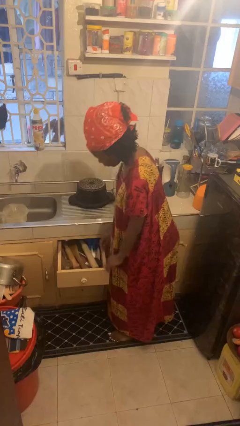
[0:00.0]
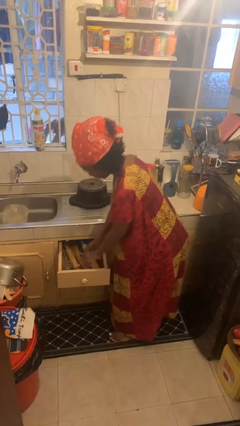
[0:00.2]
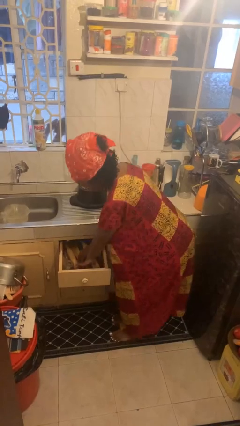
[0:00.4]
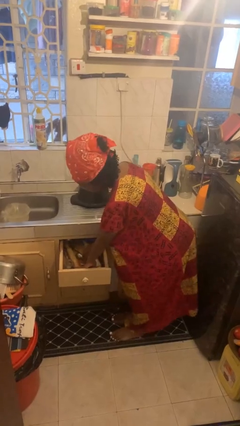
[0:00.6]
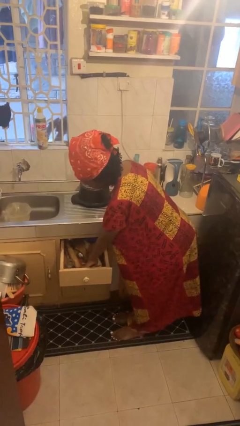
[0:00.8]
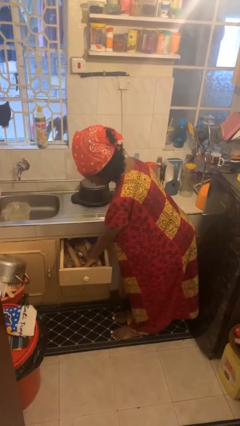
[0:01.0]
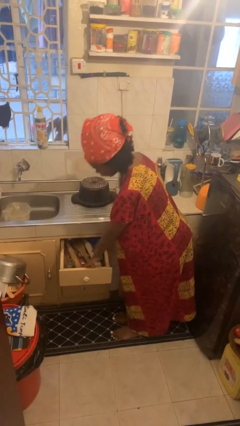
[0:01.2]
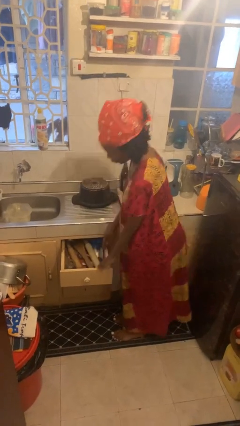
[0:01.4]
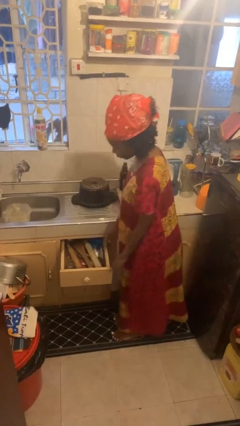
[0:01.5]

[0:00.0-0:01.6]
person searches in kitchen drawer

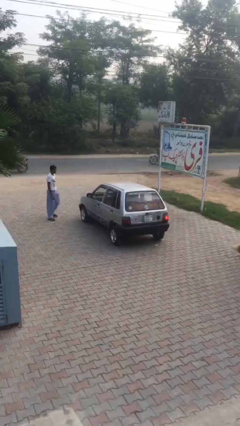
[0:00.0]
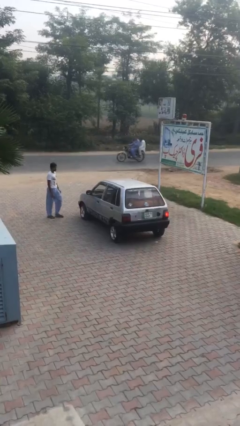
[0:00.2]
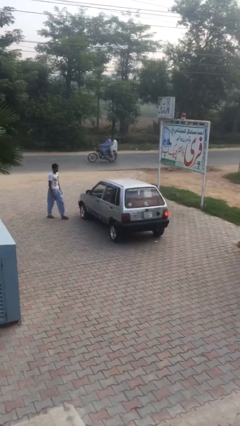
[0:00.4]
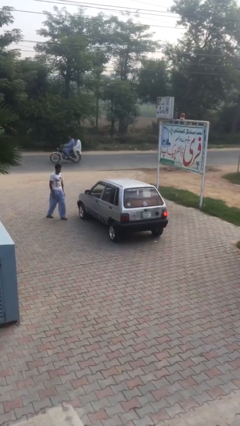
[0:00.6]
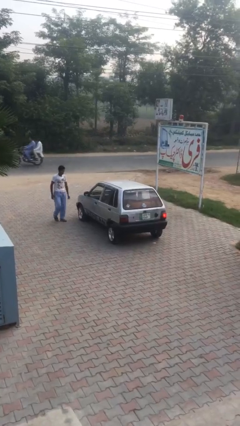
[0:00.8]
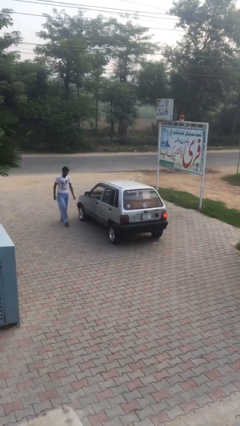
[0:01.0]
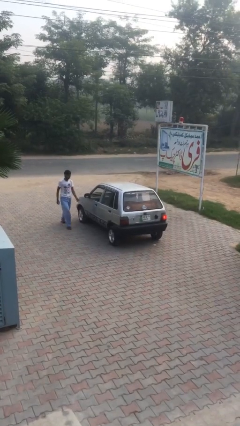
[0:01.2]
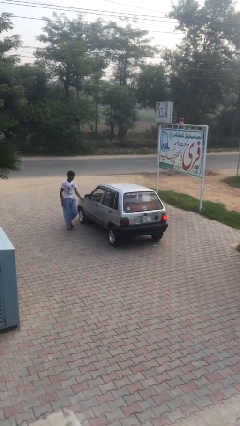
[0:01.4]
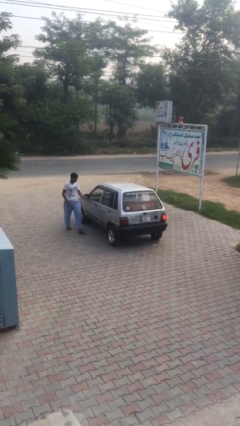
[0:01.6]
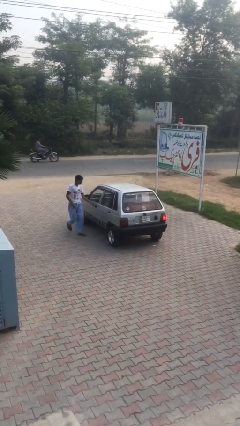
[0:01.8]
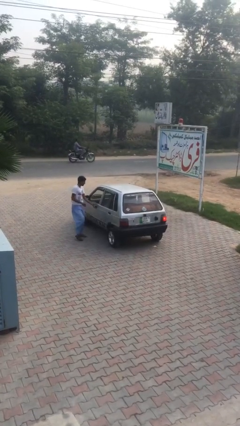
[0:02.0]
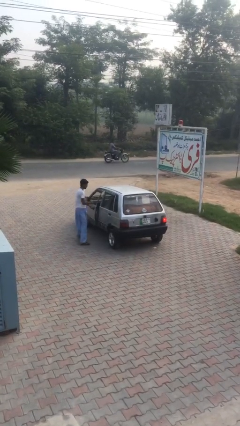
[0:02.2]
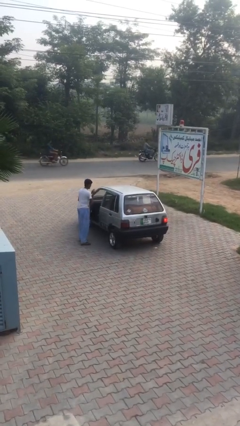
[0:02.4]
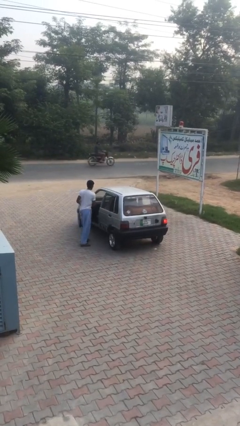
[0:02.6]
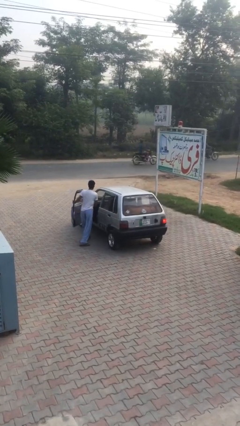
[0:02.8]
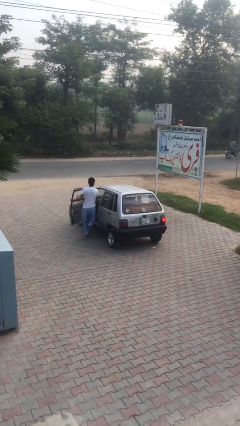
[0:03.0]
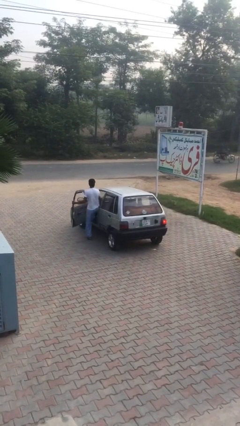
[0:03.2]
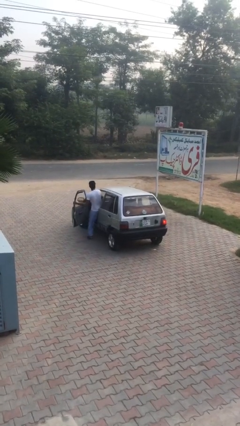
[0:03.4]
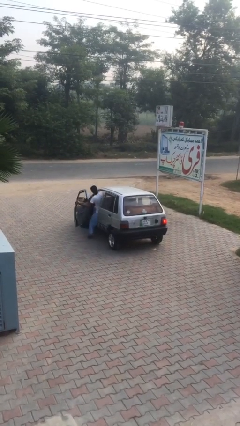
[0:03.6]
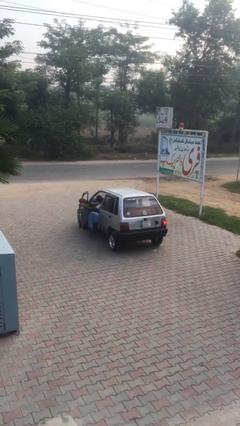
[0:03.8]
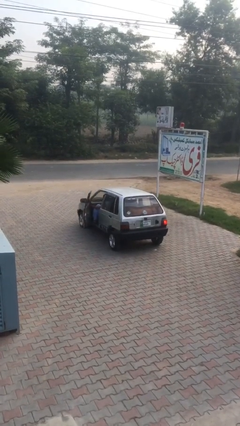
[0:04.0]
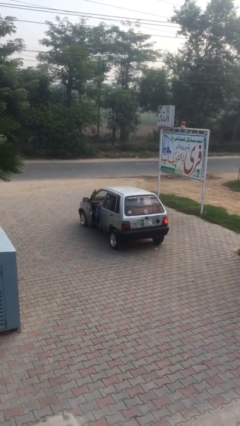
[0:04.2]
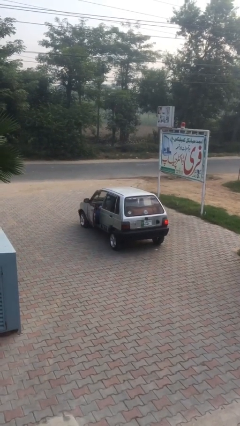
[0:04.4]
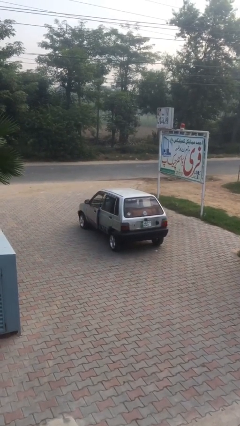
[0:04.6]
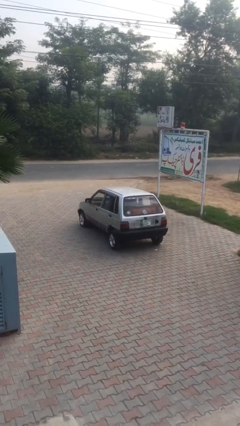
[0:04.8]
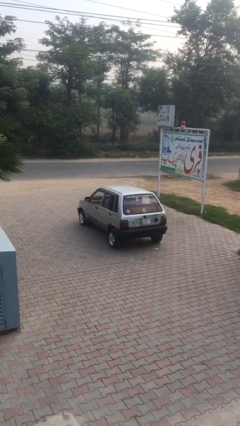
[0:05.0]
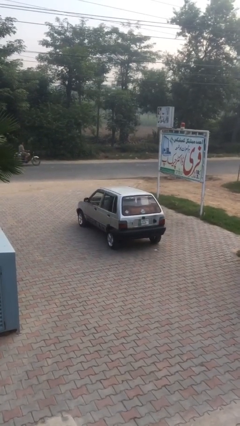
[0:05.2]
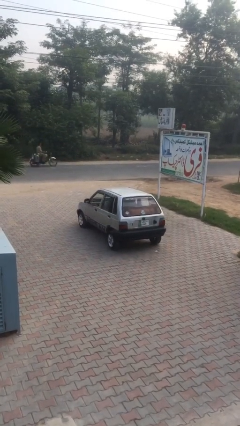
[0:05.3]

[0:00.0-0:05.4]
car picks up person

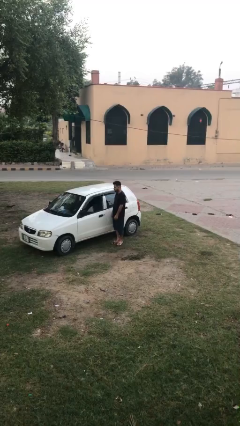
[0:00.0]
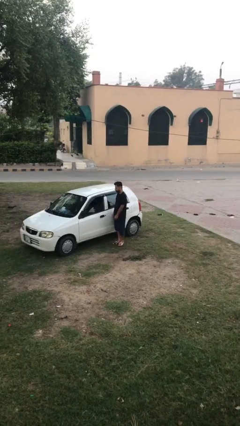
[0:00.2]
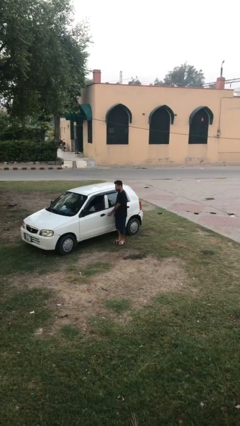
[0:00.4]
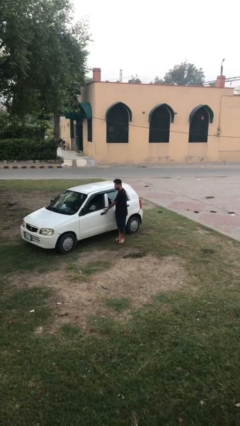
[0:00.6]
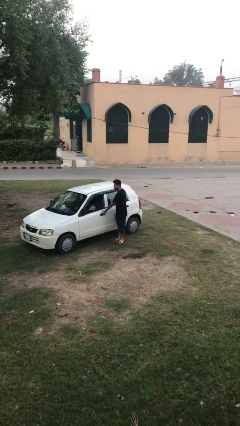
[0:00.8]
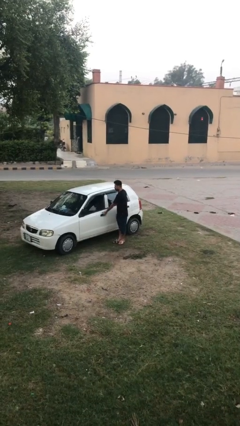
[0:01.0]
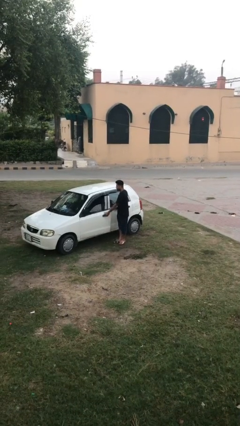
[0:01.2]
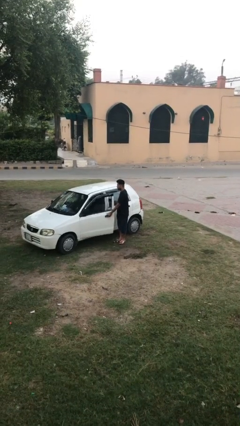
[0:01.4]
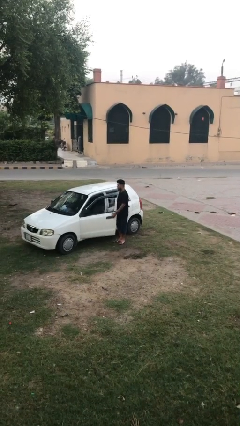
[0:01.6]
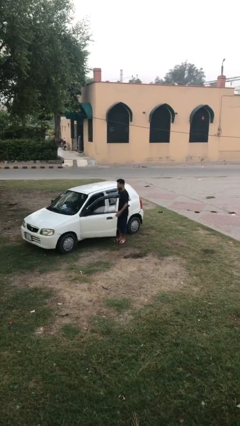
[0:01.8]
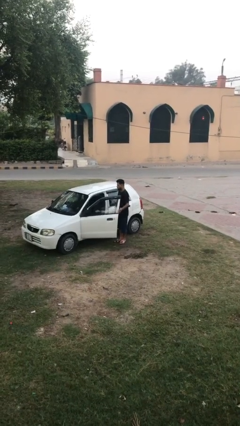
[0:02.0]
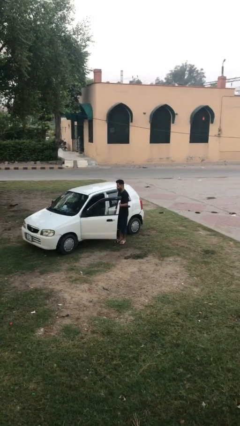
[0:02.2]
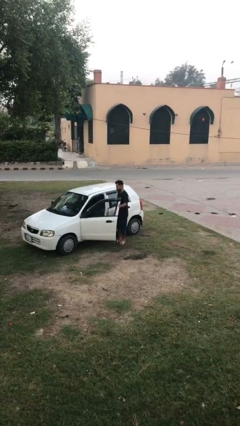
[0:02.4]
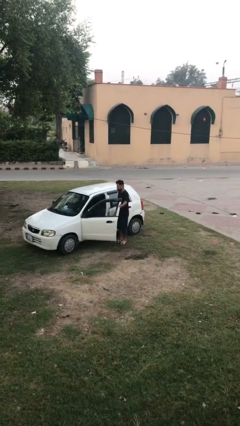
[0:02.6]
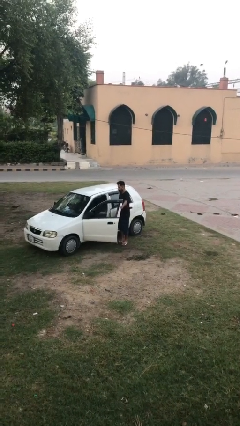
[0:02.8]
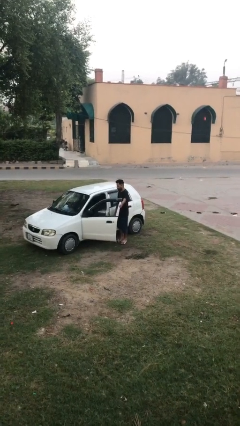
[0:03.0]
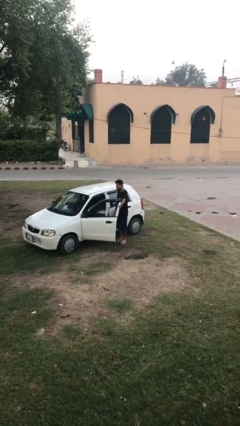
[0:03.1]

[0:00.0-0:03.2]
person opens car door

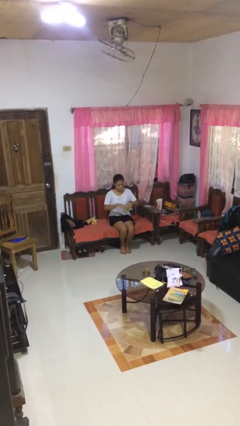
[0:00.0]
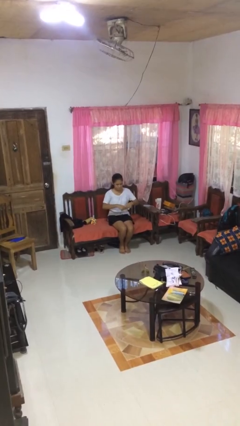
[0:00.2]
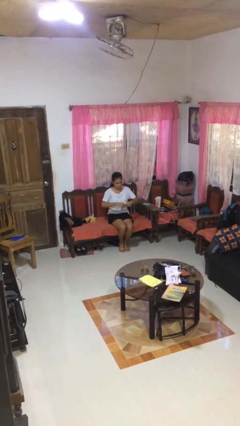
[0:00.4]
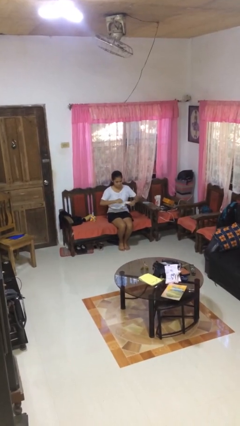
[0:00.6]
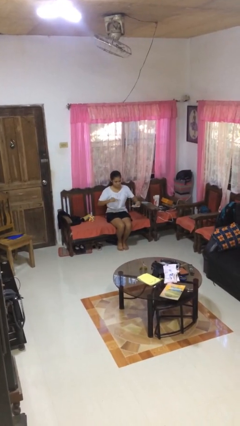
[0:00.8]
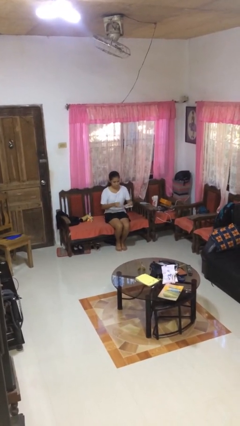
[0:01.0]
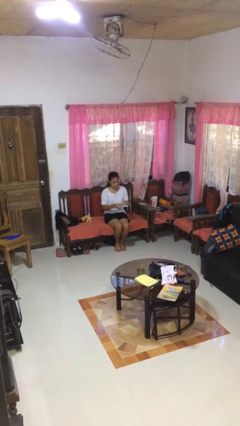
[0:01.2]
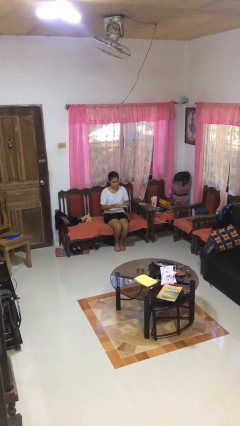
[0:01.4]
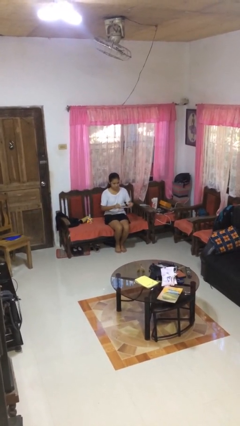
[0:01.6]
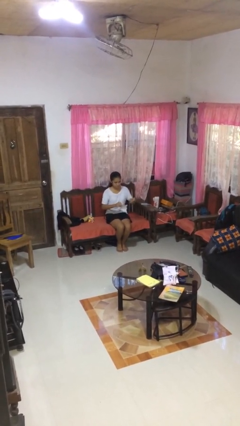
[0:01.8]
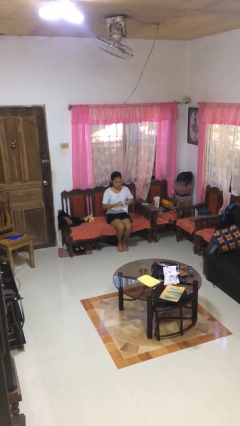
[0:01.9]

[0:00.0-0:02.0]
person tears paper

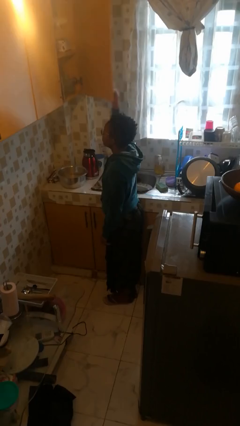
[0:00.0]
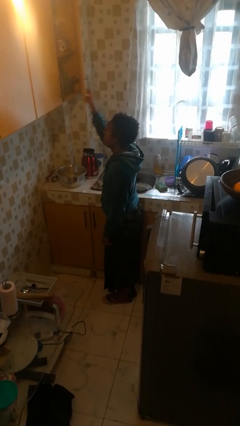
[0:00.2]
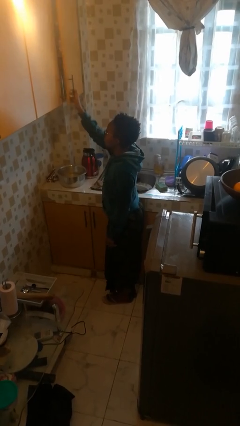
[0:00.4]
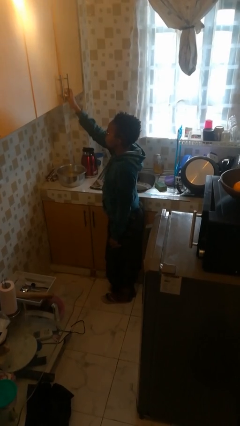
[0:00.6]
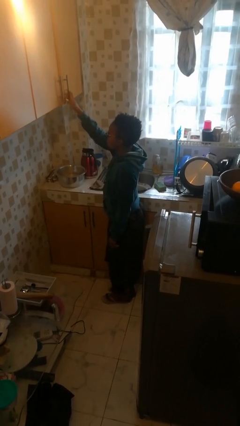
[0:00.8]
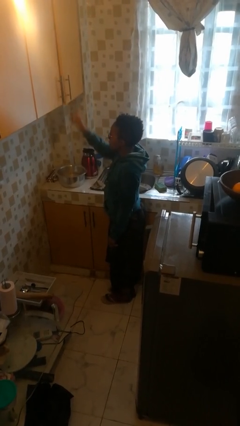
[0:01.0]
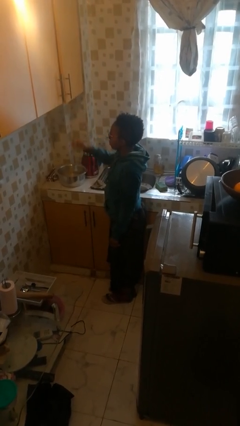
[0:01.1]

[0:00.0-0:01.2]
person closes cabinet

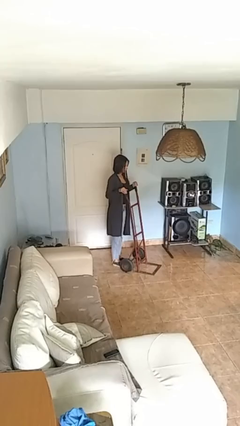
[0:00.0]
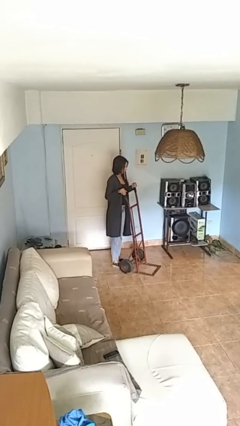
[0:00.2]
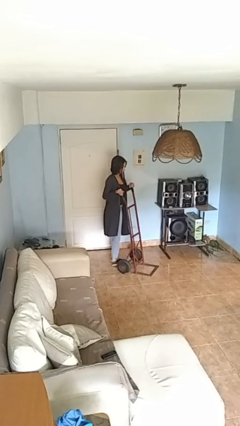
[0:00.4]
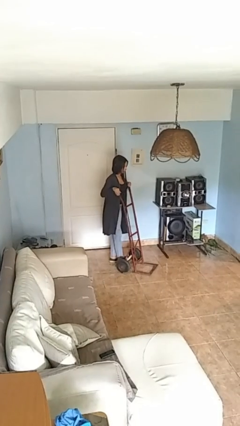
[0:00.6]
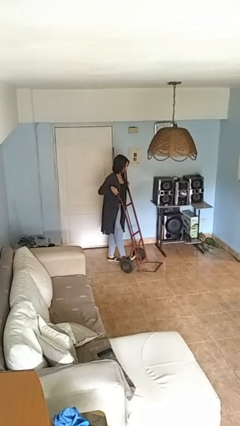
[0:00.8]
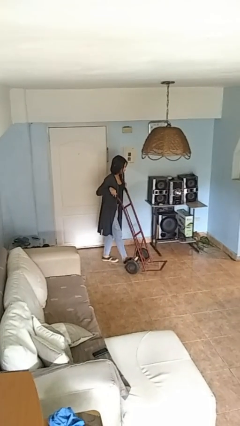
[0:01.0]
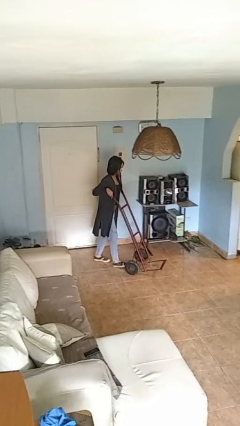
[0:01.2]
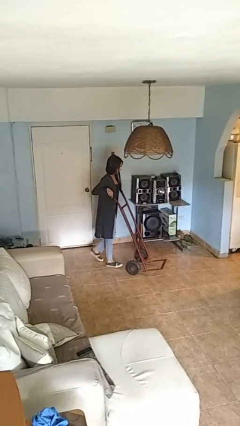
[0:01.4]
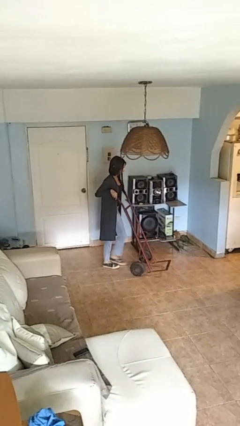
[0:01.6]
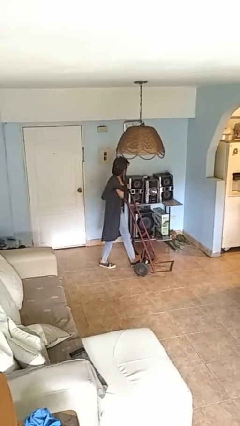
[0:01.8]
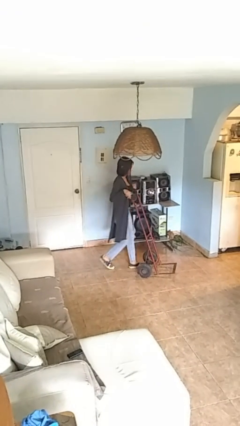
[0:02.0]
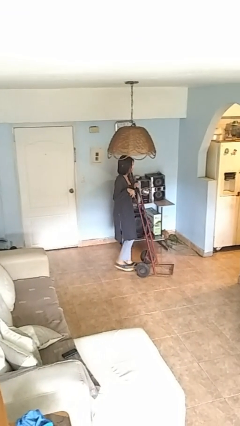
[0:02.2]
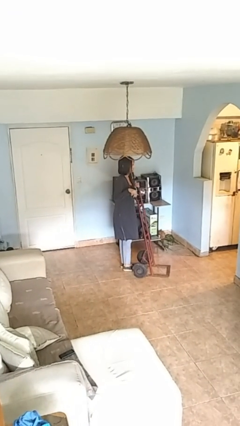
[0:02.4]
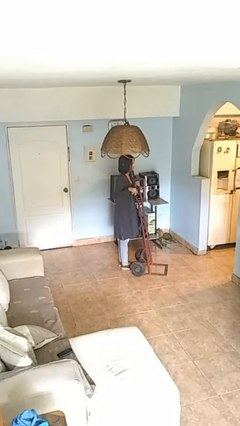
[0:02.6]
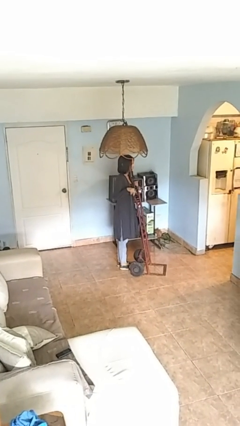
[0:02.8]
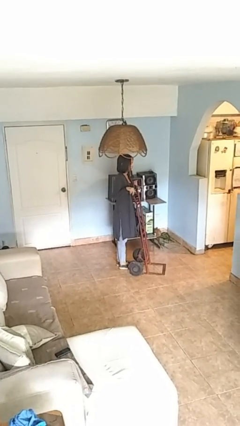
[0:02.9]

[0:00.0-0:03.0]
person pushes wheeled cart

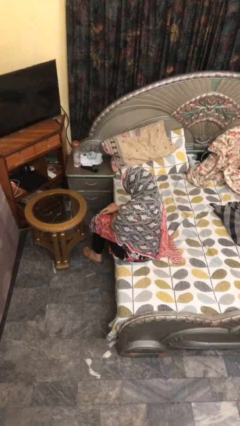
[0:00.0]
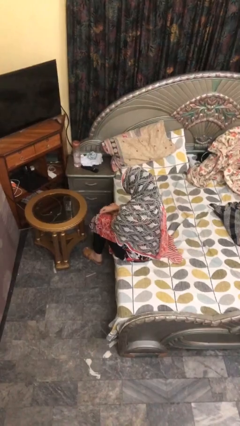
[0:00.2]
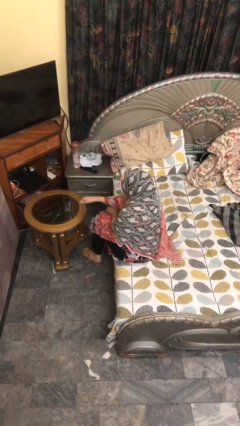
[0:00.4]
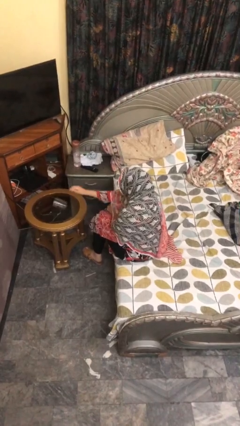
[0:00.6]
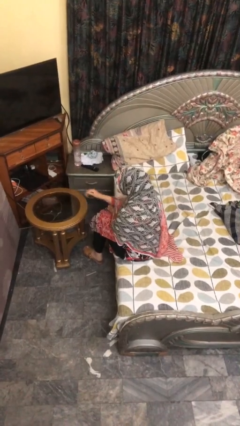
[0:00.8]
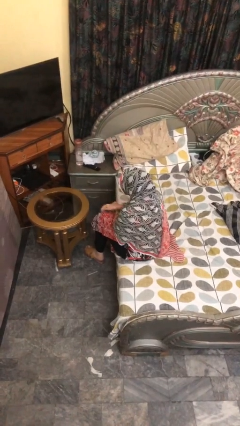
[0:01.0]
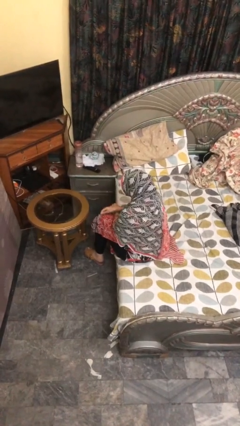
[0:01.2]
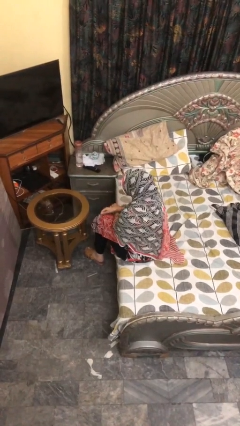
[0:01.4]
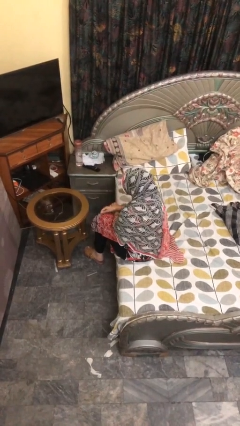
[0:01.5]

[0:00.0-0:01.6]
person knocks over glass
